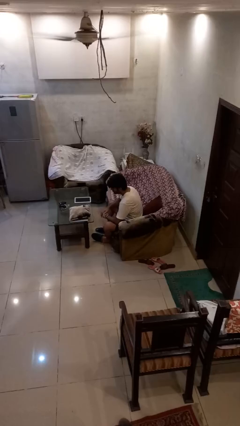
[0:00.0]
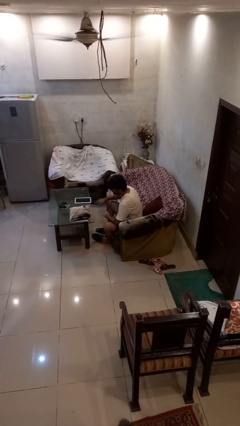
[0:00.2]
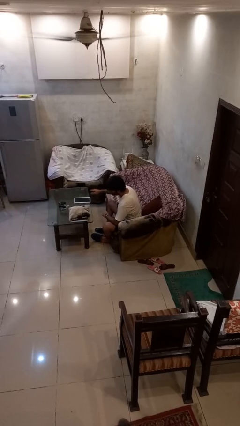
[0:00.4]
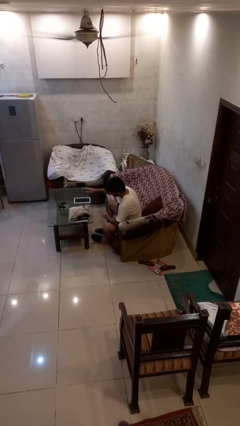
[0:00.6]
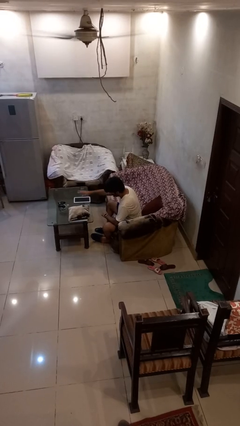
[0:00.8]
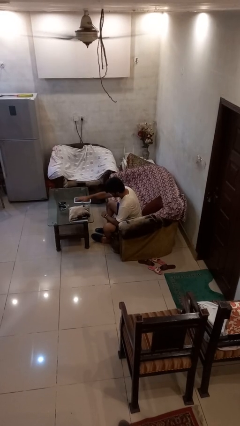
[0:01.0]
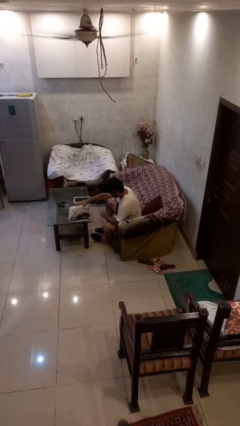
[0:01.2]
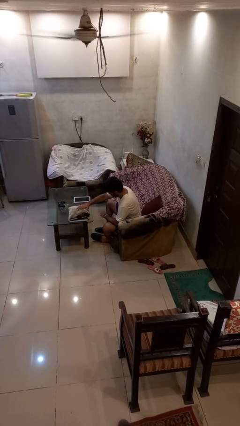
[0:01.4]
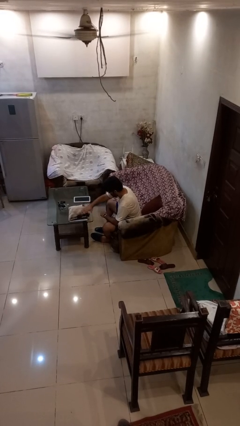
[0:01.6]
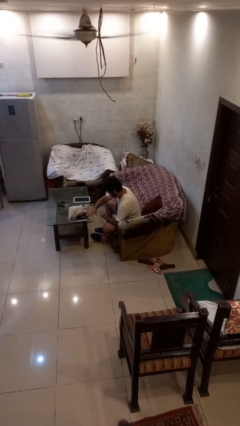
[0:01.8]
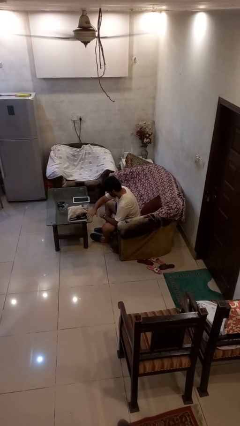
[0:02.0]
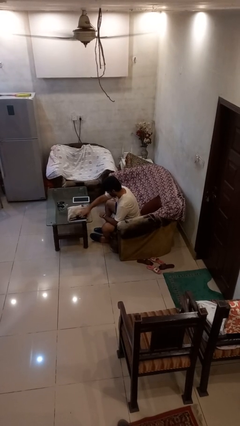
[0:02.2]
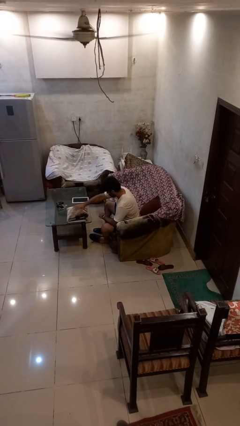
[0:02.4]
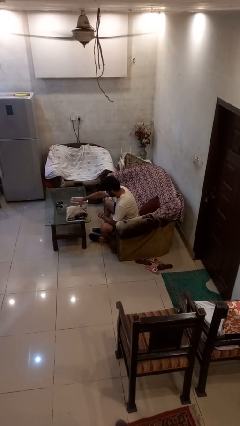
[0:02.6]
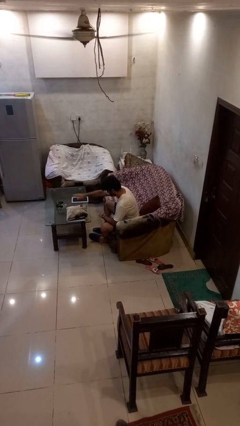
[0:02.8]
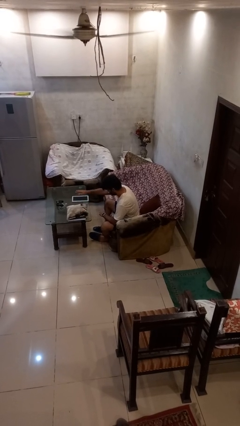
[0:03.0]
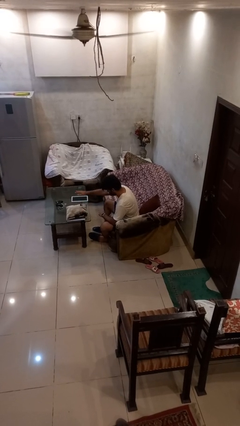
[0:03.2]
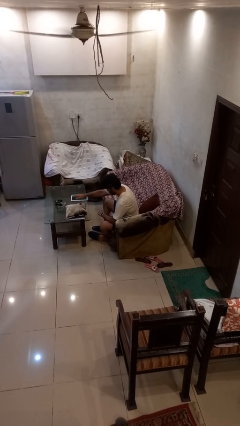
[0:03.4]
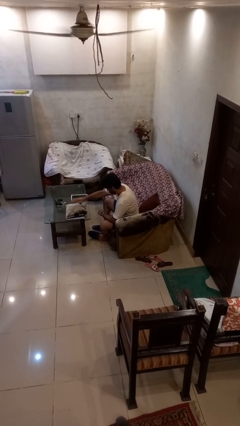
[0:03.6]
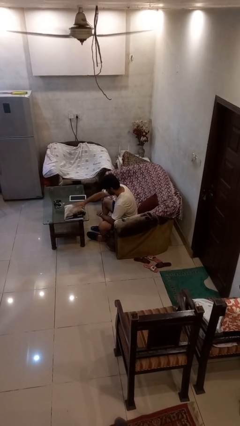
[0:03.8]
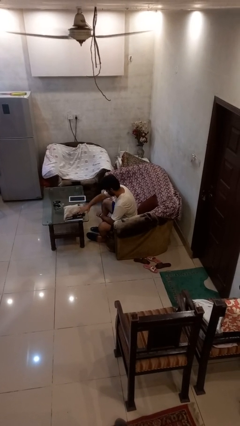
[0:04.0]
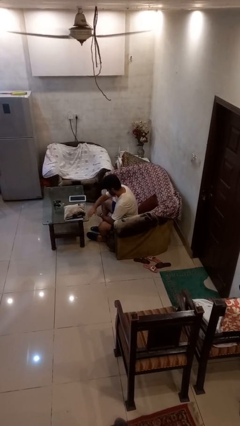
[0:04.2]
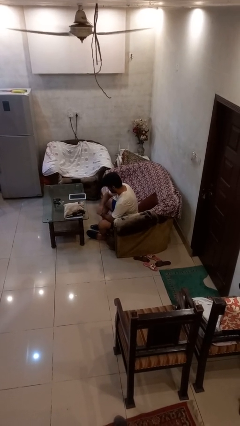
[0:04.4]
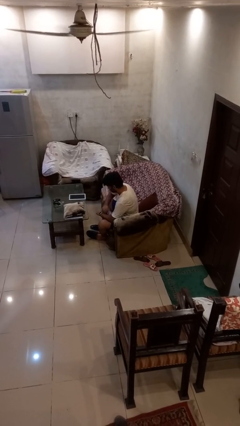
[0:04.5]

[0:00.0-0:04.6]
person waves hand over object

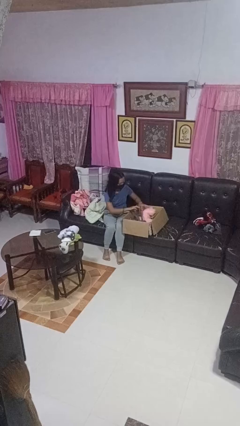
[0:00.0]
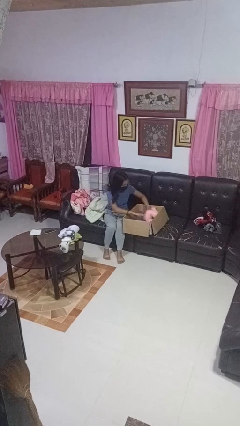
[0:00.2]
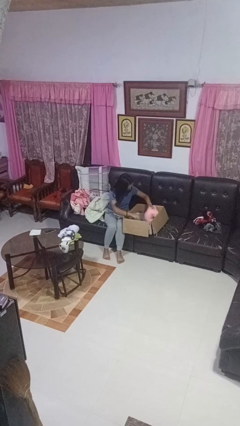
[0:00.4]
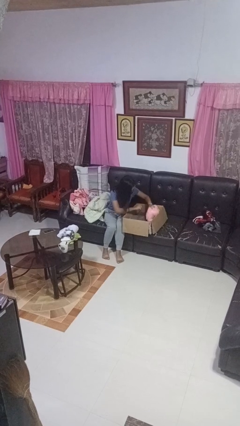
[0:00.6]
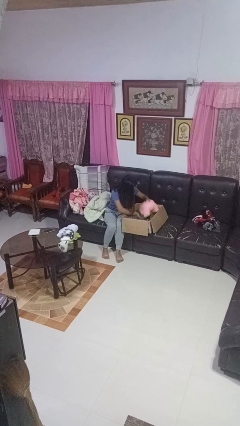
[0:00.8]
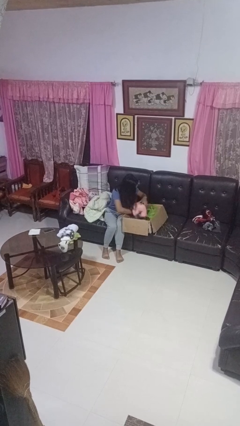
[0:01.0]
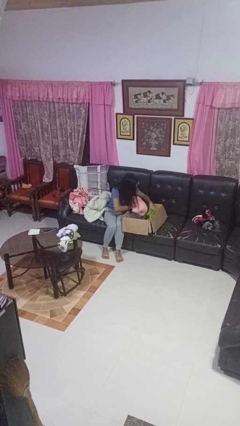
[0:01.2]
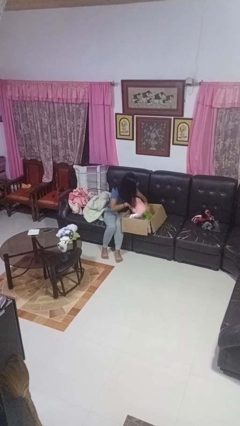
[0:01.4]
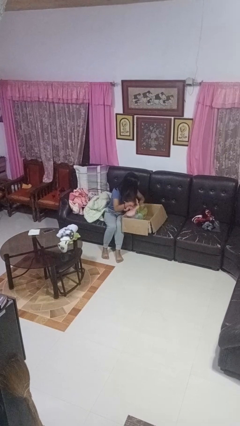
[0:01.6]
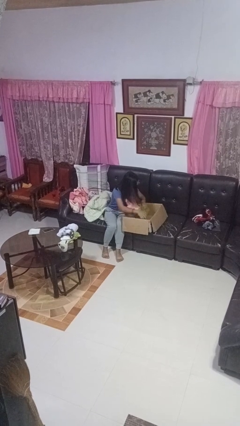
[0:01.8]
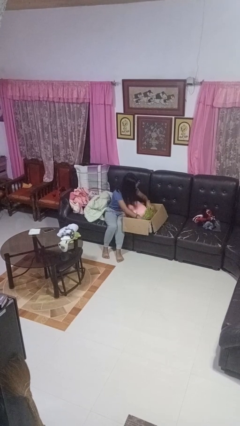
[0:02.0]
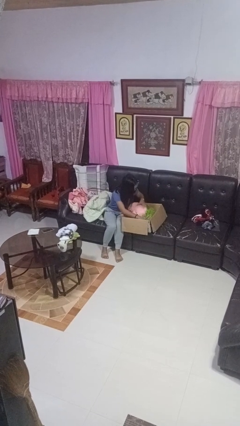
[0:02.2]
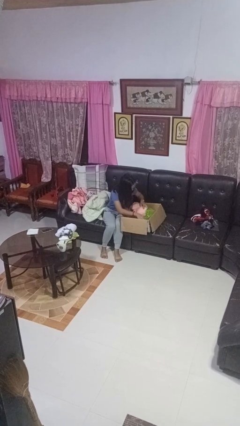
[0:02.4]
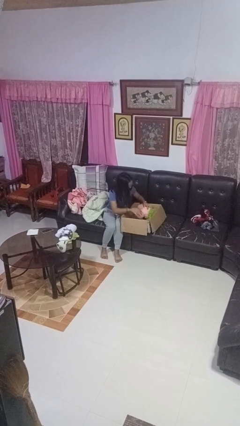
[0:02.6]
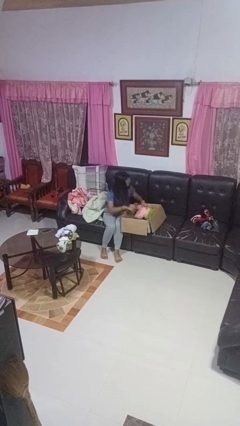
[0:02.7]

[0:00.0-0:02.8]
person searches in box

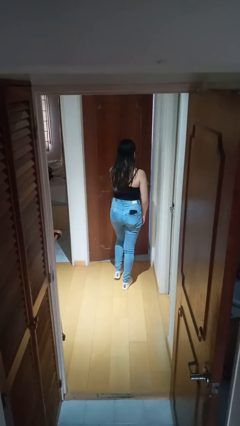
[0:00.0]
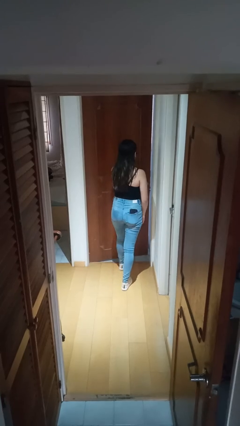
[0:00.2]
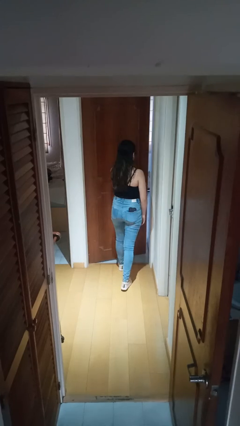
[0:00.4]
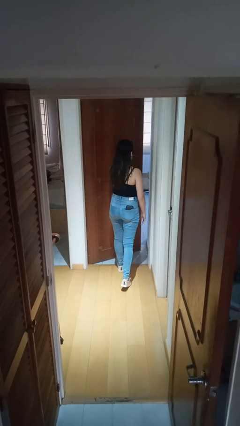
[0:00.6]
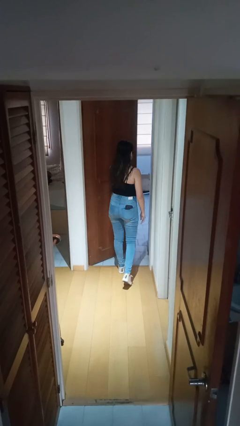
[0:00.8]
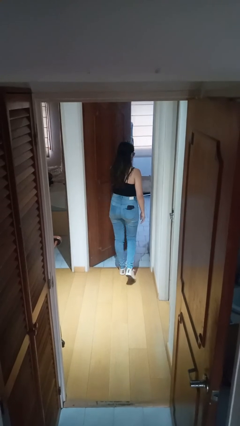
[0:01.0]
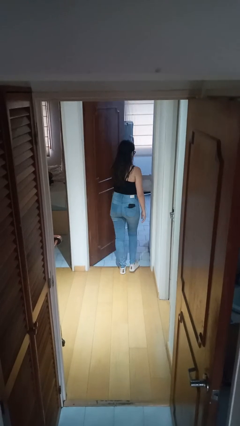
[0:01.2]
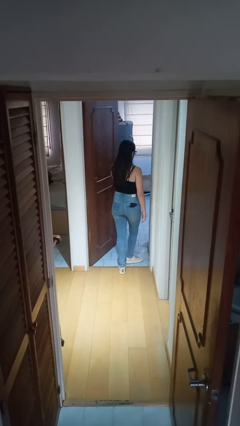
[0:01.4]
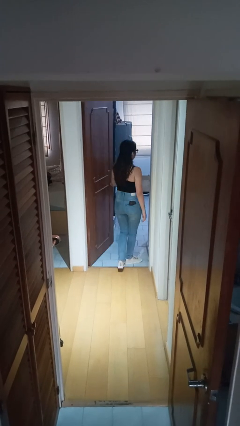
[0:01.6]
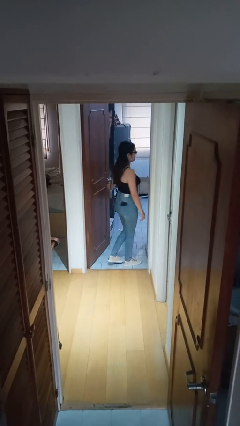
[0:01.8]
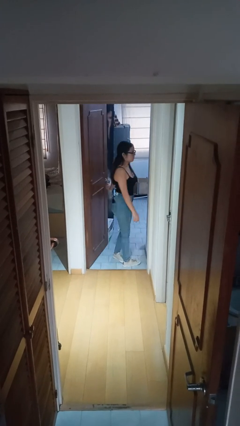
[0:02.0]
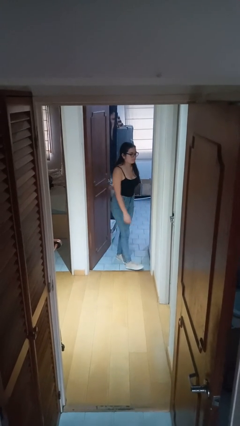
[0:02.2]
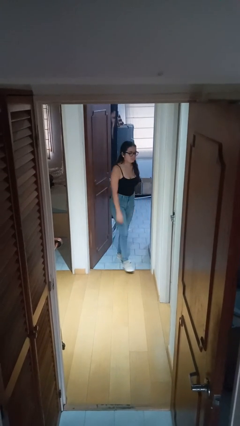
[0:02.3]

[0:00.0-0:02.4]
person opens facility door

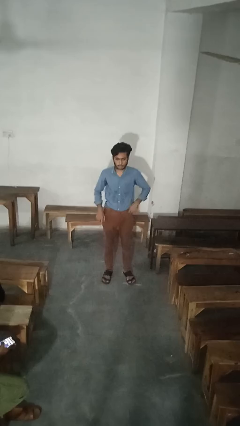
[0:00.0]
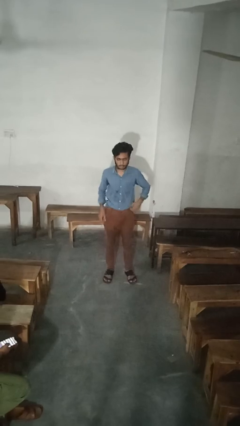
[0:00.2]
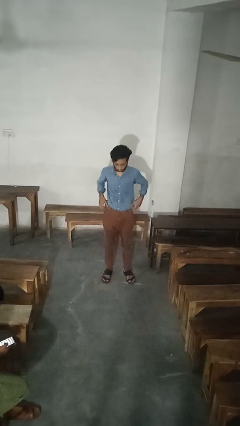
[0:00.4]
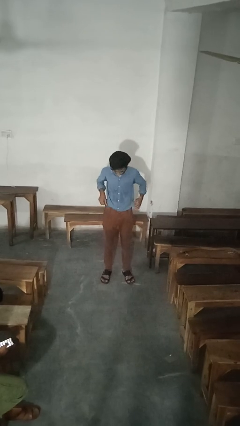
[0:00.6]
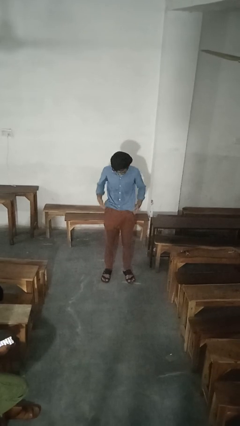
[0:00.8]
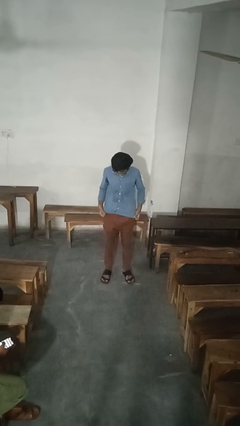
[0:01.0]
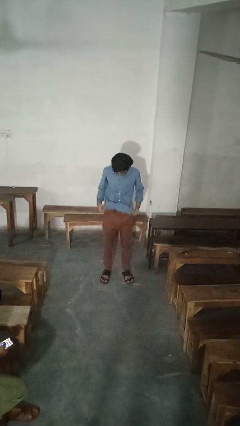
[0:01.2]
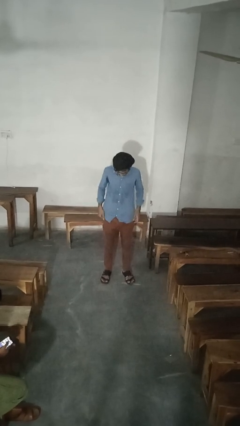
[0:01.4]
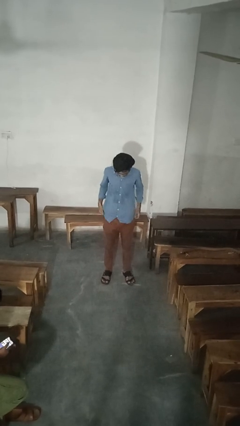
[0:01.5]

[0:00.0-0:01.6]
person untucks shirt

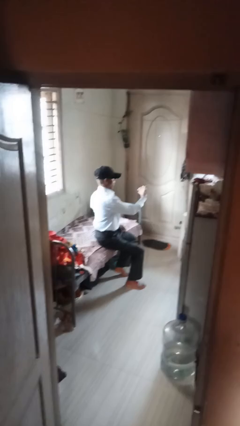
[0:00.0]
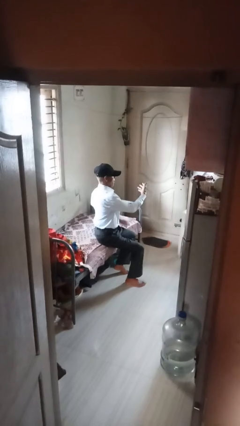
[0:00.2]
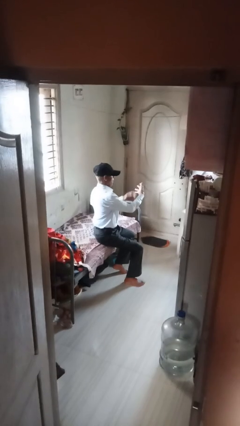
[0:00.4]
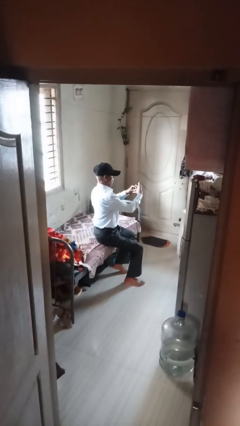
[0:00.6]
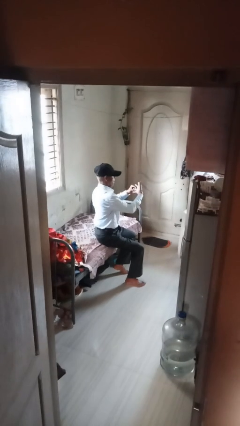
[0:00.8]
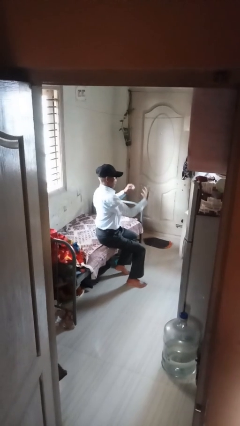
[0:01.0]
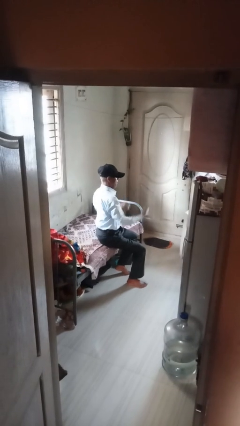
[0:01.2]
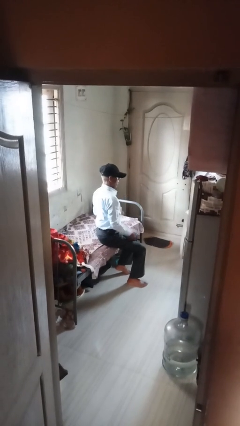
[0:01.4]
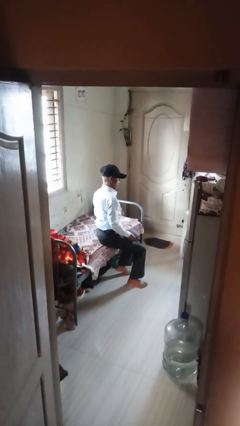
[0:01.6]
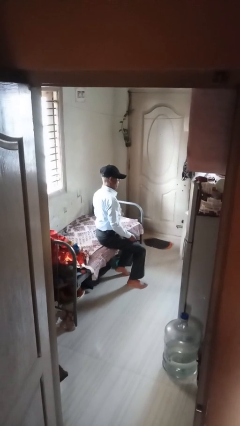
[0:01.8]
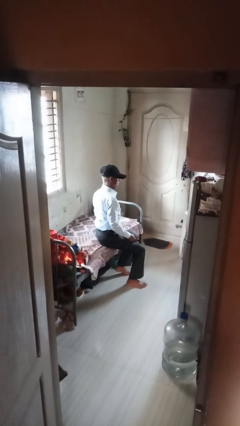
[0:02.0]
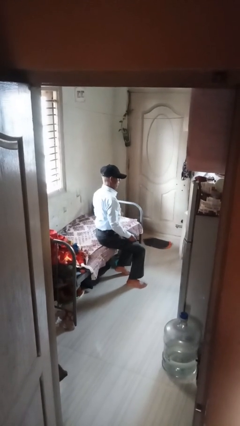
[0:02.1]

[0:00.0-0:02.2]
person takes off ring

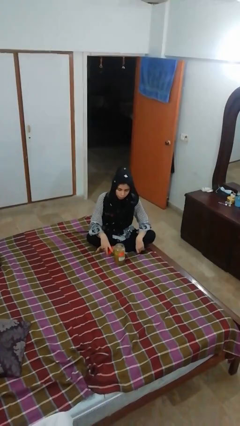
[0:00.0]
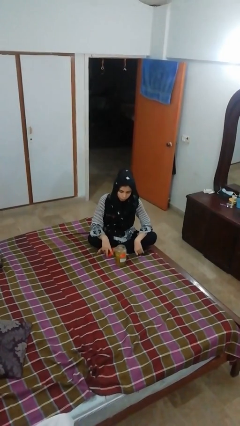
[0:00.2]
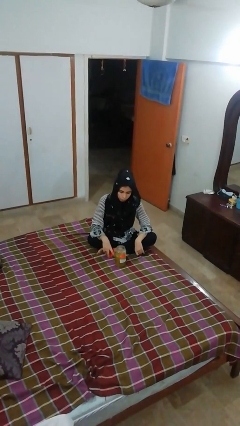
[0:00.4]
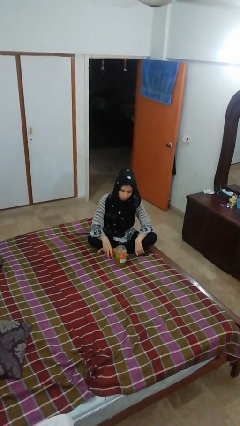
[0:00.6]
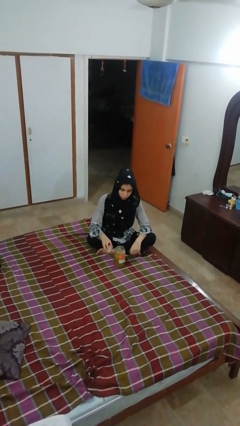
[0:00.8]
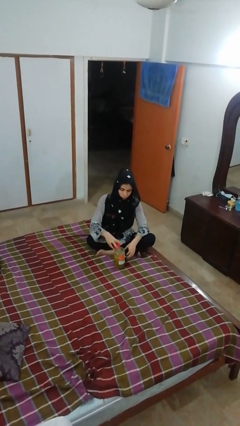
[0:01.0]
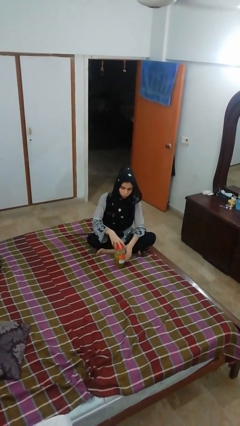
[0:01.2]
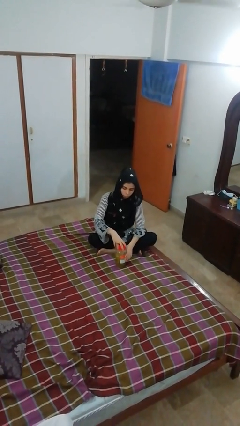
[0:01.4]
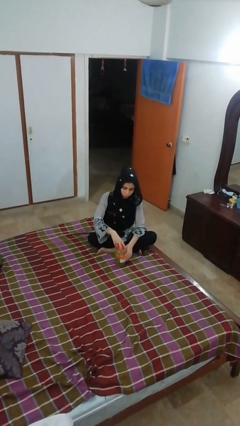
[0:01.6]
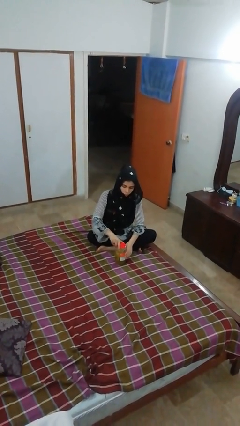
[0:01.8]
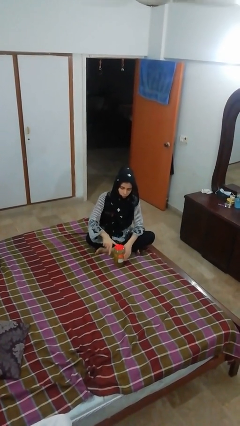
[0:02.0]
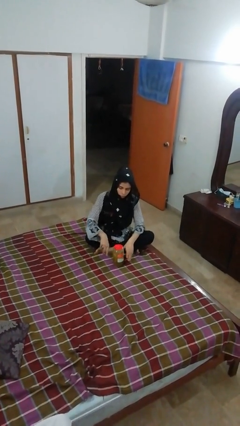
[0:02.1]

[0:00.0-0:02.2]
person closes jar

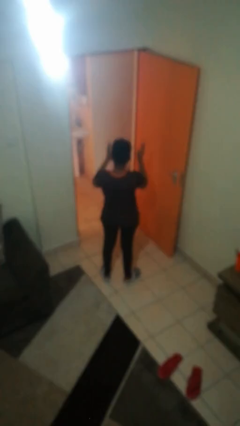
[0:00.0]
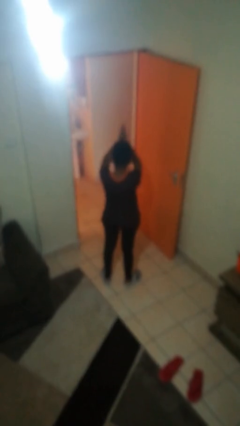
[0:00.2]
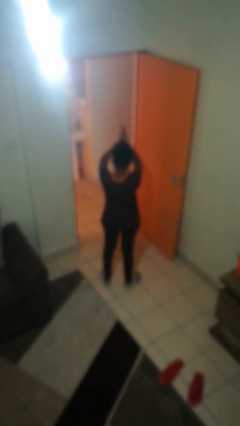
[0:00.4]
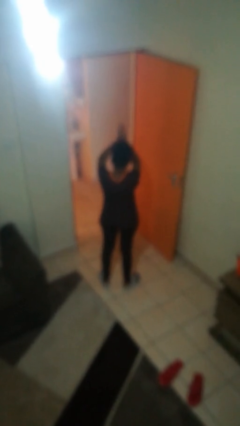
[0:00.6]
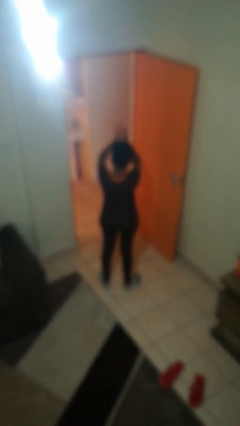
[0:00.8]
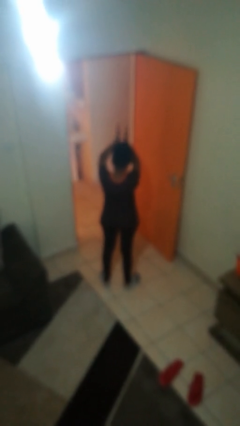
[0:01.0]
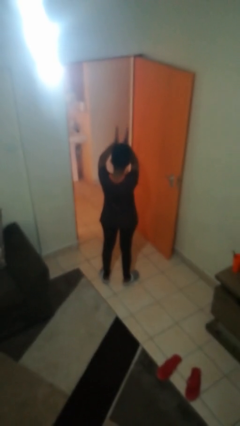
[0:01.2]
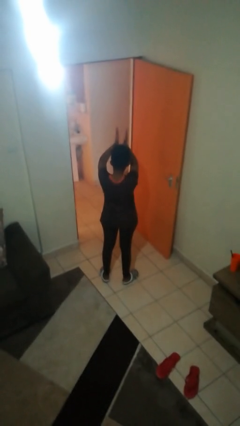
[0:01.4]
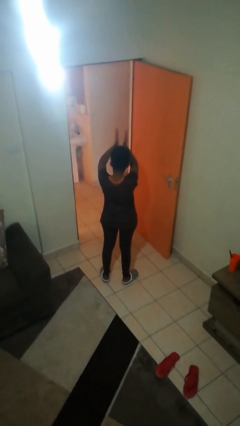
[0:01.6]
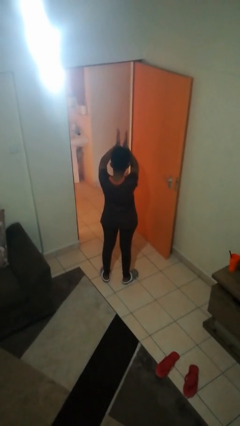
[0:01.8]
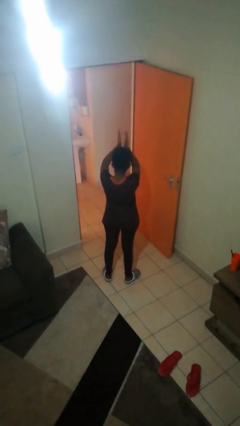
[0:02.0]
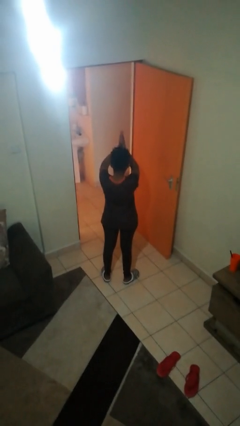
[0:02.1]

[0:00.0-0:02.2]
person claps hands
